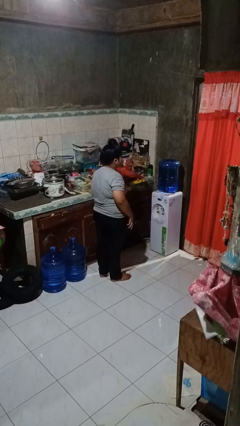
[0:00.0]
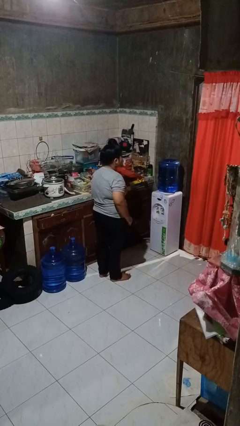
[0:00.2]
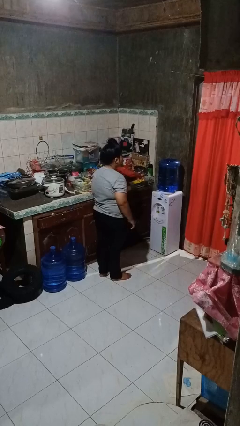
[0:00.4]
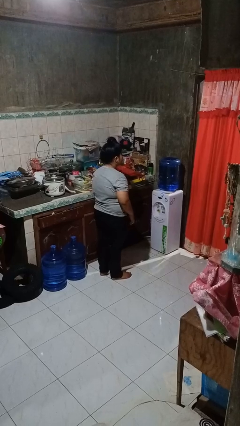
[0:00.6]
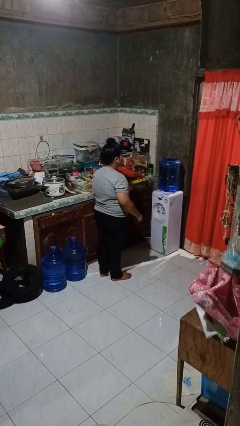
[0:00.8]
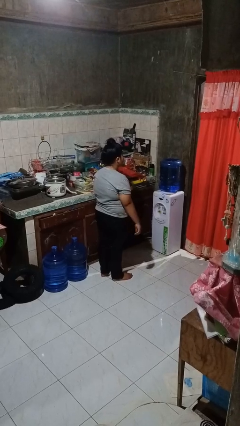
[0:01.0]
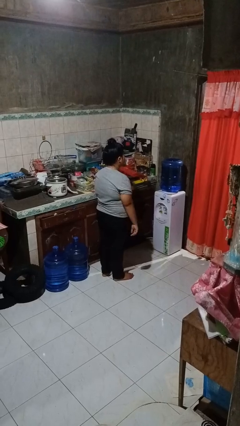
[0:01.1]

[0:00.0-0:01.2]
person puts phone into pocket

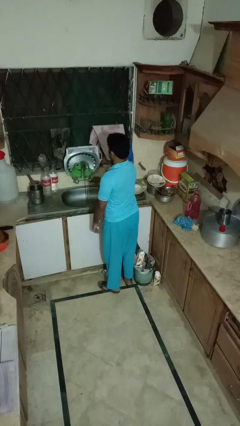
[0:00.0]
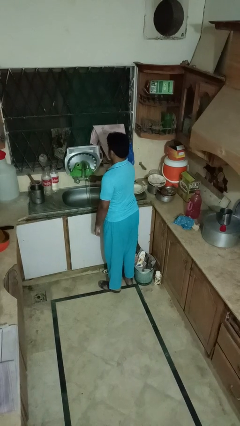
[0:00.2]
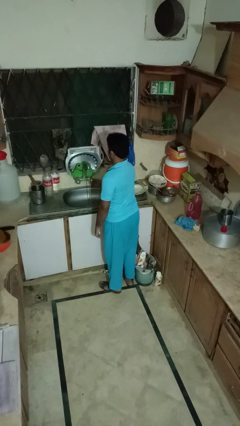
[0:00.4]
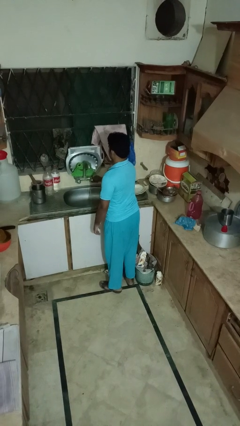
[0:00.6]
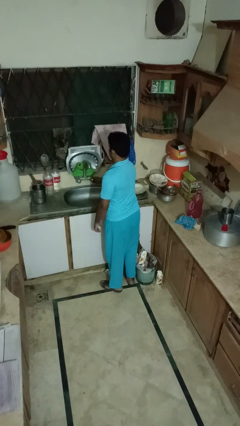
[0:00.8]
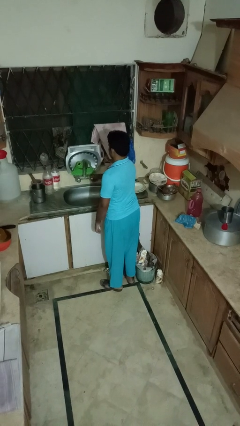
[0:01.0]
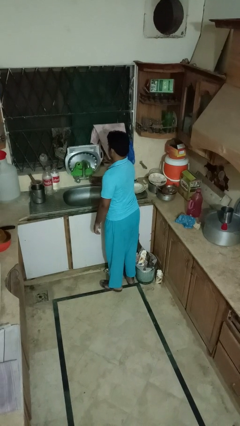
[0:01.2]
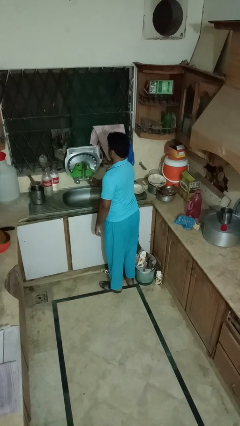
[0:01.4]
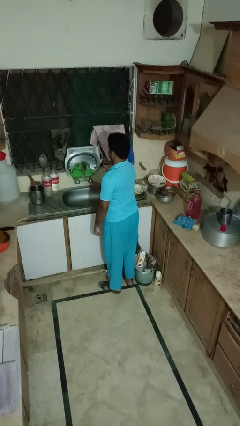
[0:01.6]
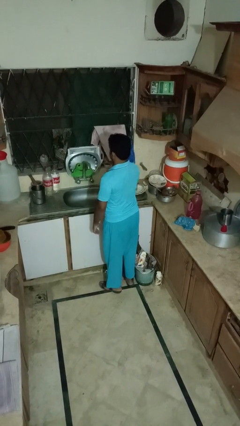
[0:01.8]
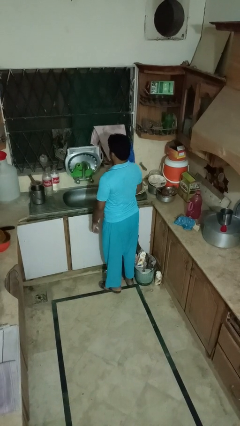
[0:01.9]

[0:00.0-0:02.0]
person turns off faucet

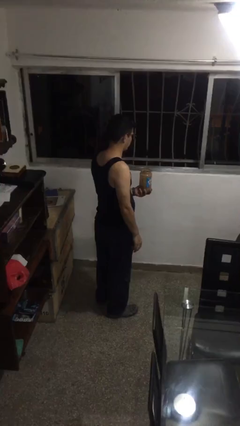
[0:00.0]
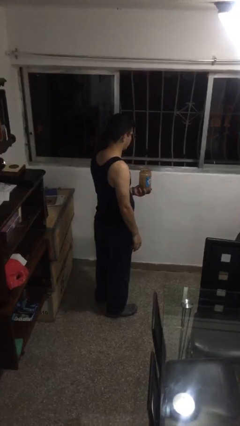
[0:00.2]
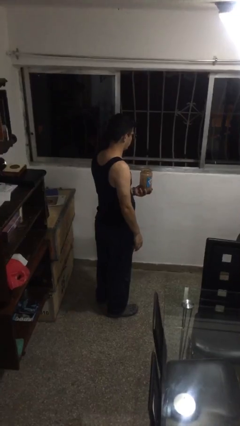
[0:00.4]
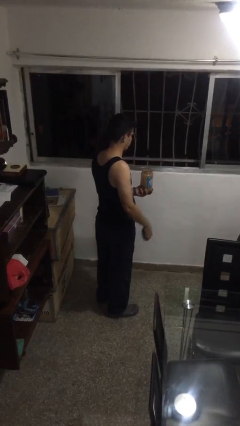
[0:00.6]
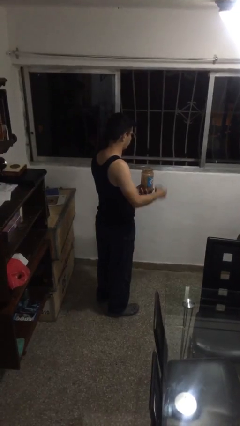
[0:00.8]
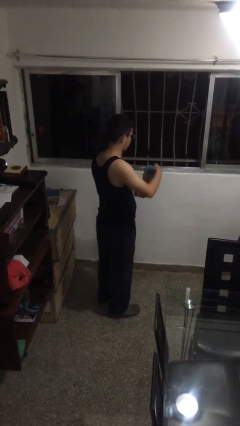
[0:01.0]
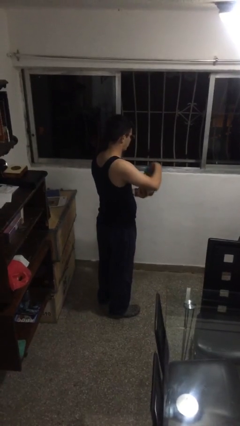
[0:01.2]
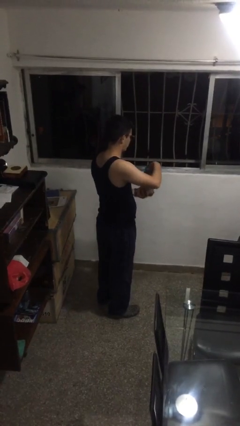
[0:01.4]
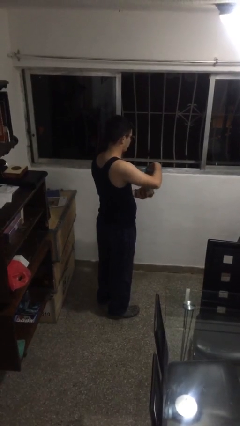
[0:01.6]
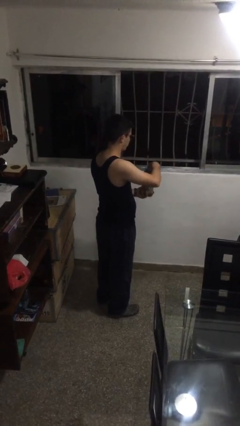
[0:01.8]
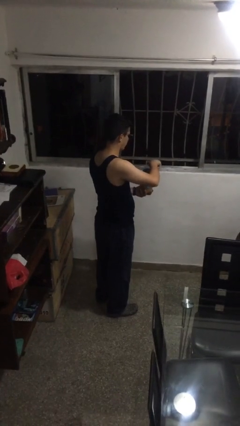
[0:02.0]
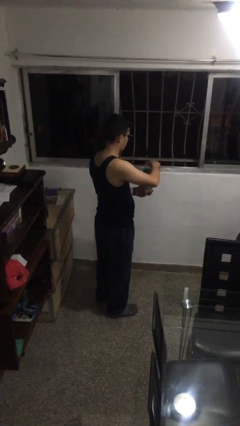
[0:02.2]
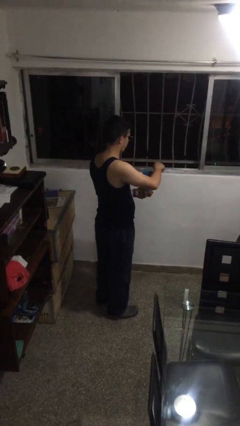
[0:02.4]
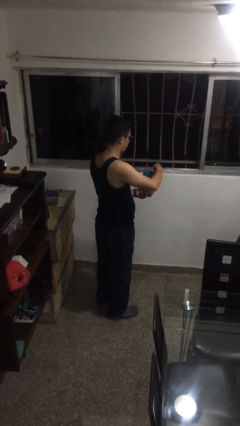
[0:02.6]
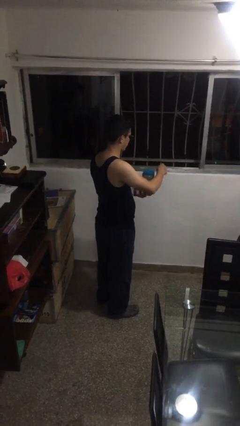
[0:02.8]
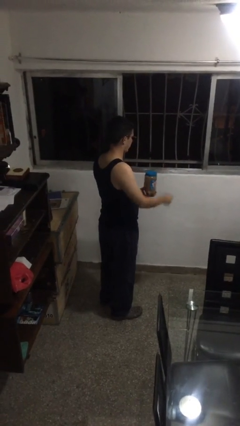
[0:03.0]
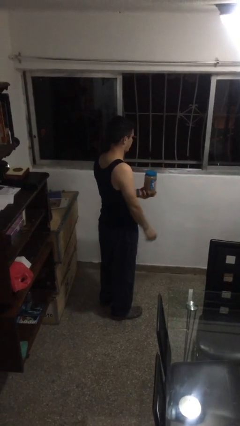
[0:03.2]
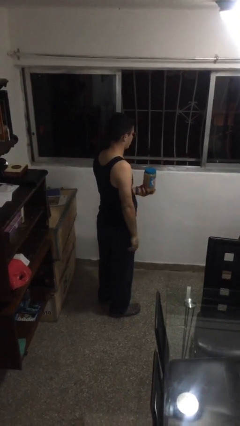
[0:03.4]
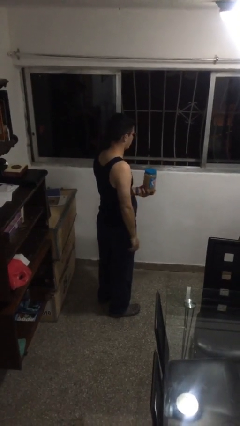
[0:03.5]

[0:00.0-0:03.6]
person closes jar

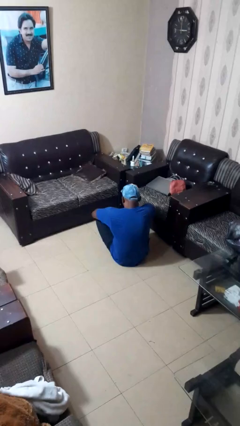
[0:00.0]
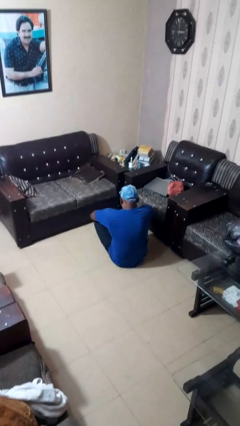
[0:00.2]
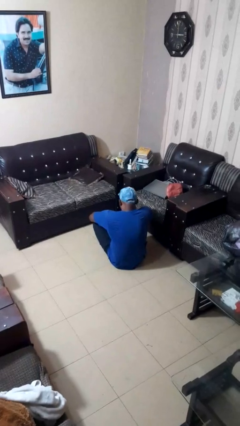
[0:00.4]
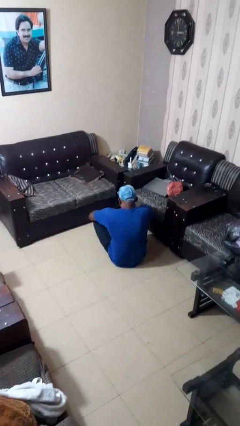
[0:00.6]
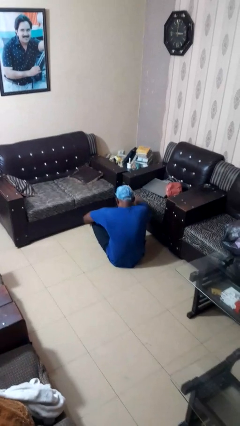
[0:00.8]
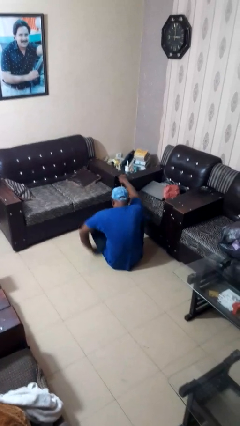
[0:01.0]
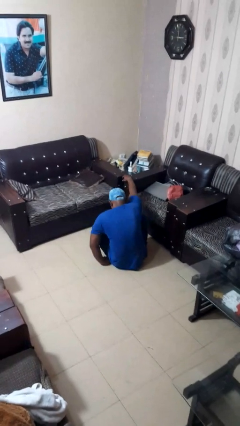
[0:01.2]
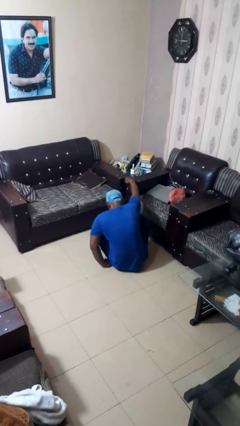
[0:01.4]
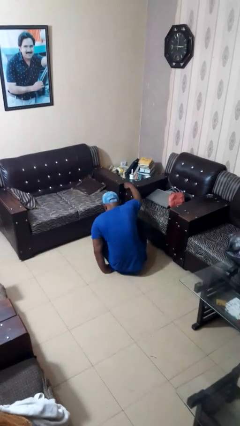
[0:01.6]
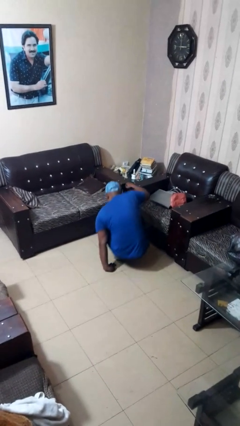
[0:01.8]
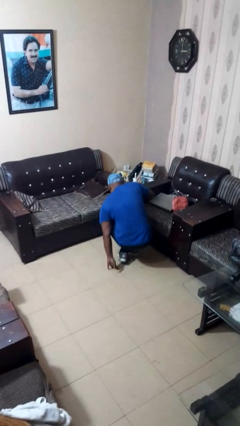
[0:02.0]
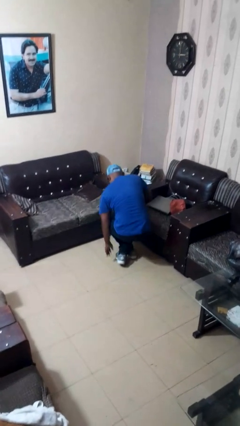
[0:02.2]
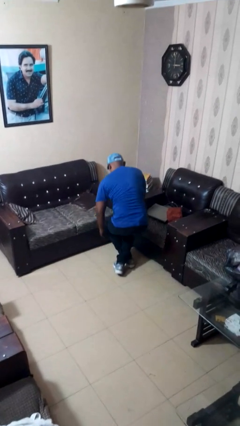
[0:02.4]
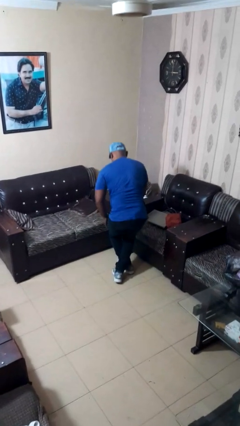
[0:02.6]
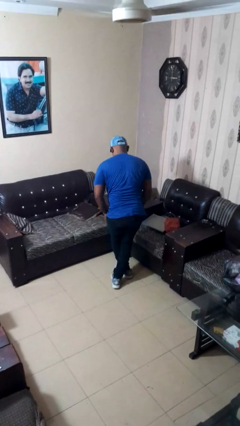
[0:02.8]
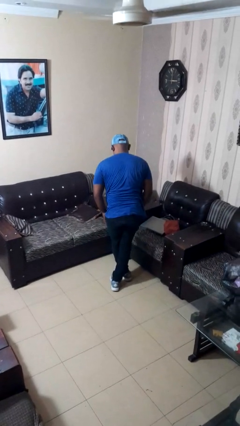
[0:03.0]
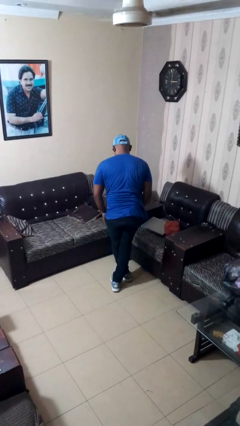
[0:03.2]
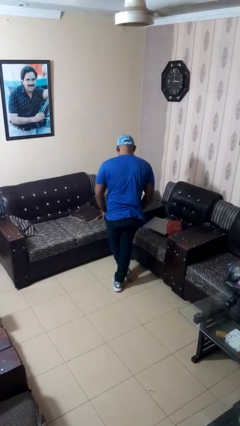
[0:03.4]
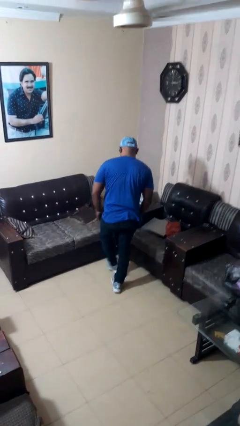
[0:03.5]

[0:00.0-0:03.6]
person stands up from floor

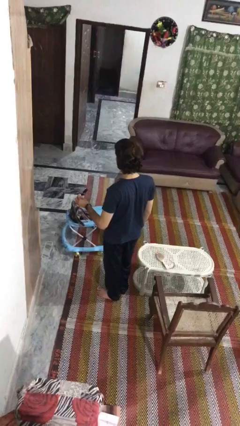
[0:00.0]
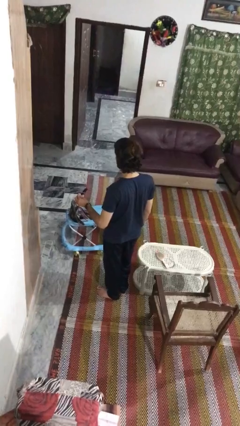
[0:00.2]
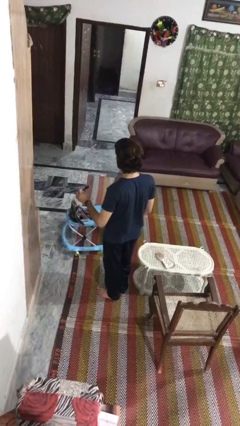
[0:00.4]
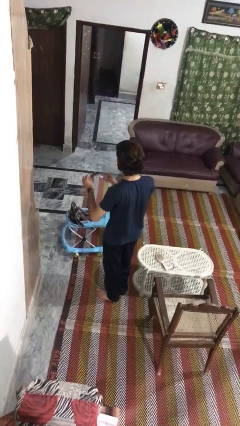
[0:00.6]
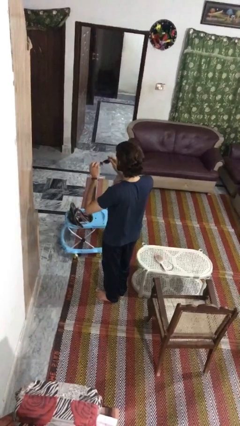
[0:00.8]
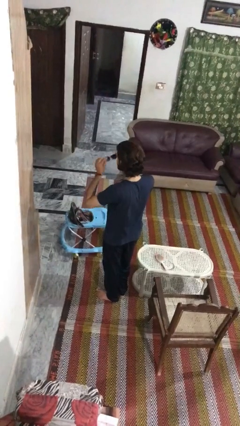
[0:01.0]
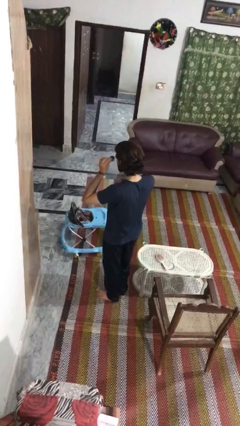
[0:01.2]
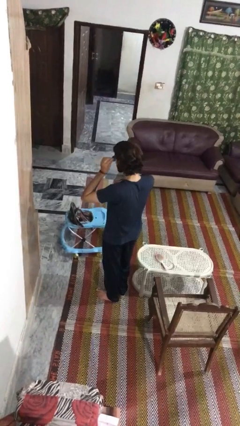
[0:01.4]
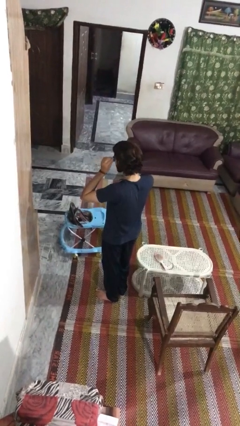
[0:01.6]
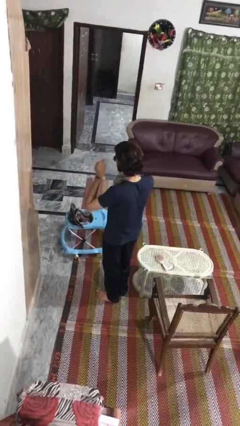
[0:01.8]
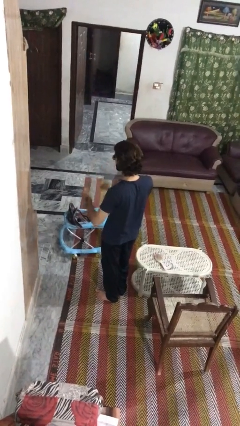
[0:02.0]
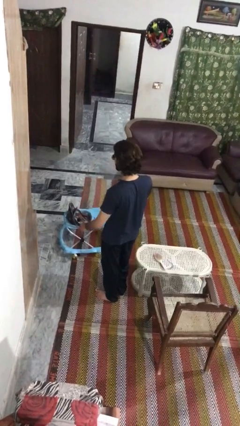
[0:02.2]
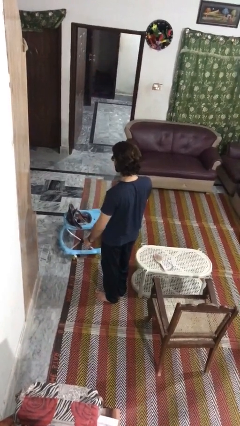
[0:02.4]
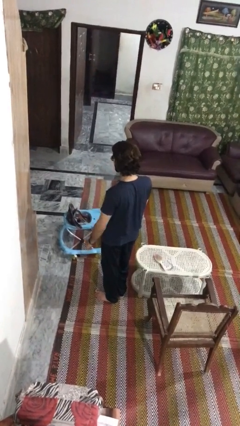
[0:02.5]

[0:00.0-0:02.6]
person puts on sunglasses

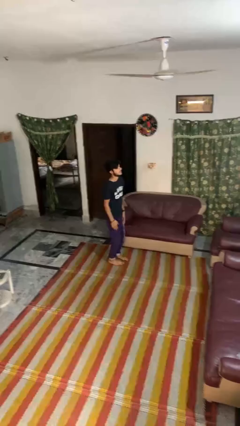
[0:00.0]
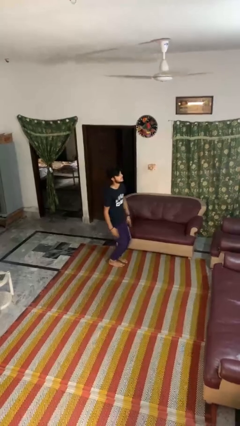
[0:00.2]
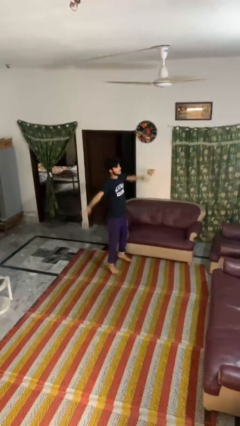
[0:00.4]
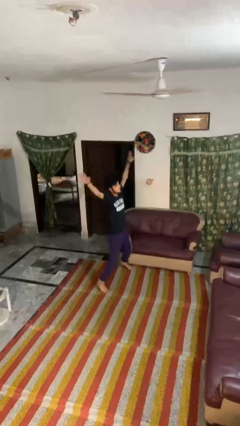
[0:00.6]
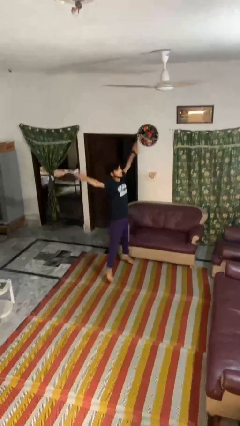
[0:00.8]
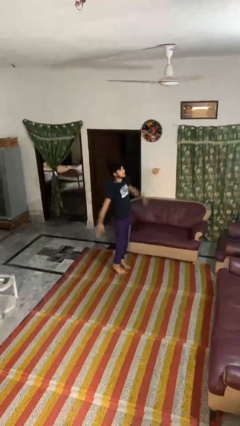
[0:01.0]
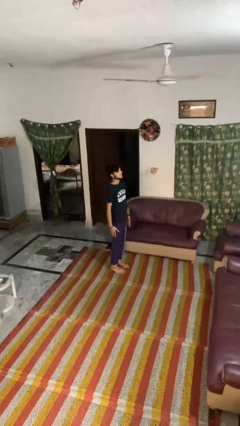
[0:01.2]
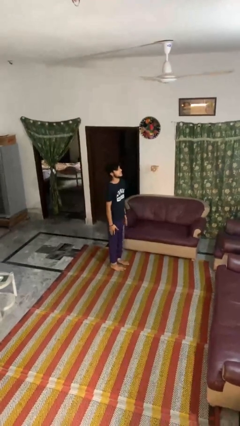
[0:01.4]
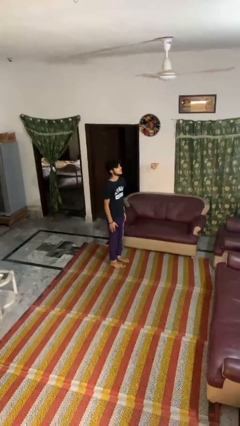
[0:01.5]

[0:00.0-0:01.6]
person exercises with jumping jacks

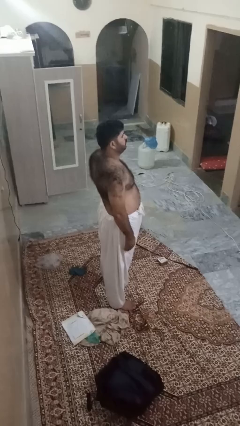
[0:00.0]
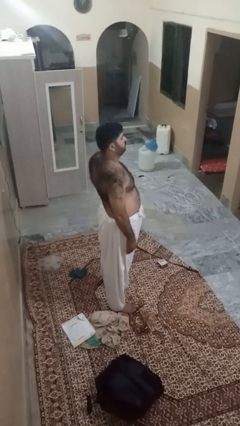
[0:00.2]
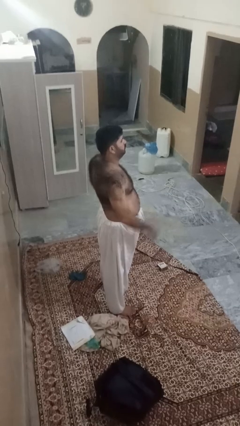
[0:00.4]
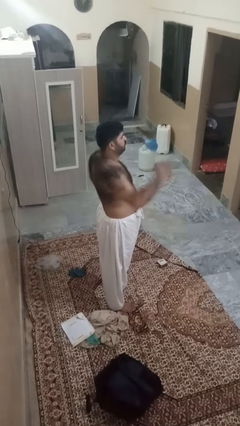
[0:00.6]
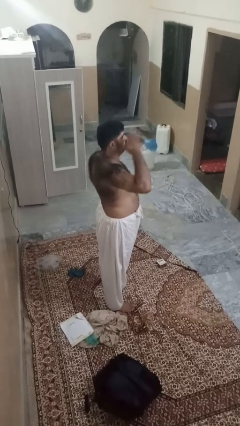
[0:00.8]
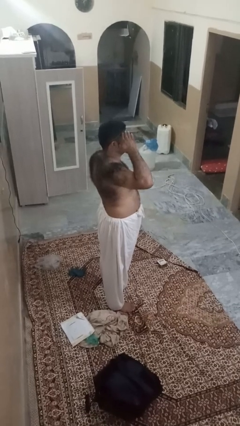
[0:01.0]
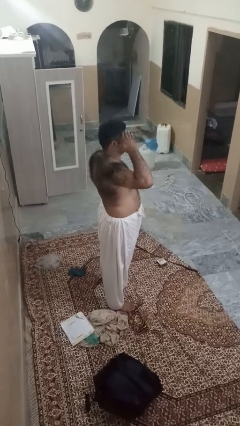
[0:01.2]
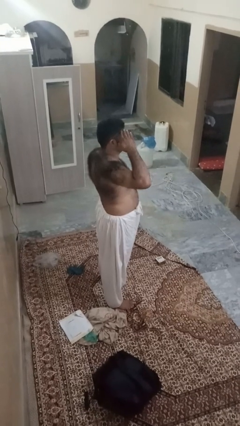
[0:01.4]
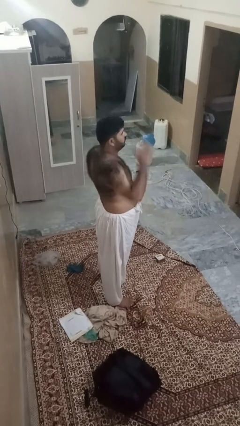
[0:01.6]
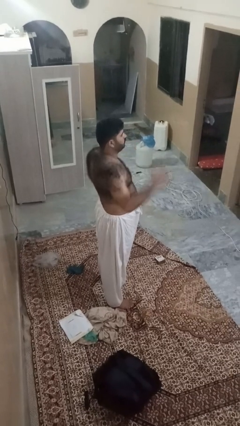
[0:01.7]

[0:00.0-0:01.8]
person salutes

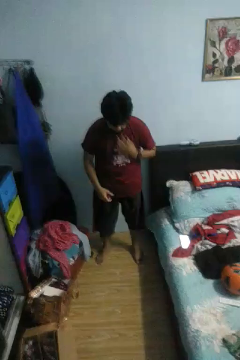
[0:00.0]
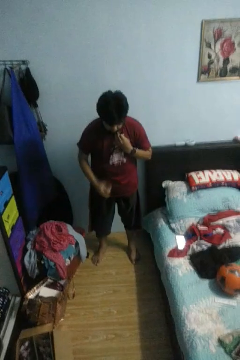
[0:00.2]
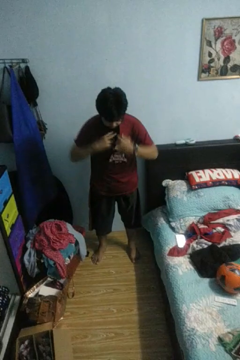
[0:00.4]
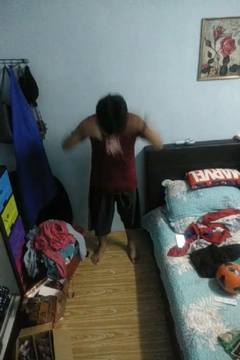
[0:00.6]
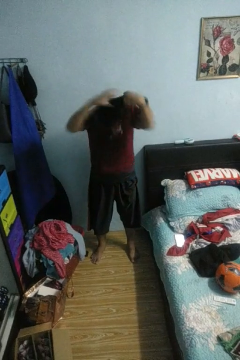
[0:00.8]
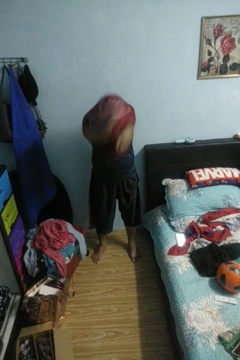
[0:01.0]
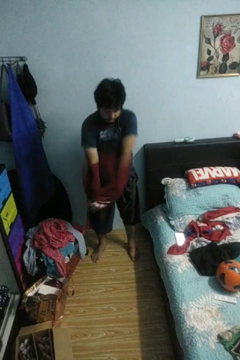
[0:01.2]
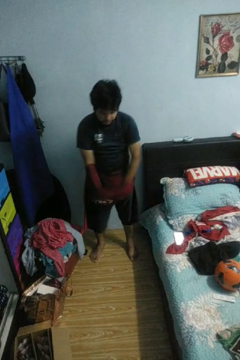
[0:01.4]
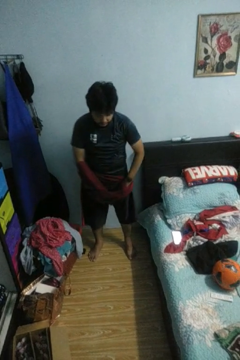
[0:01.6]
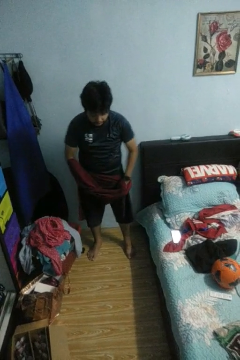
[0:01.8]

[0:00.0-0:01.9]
person takes off shirt
